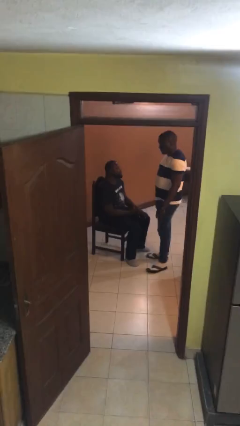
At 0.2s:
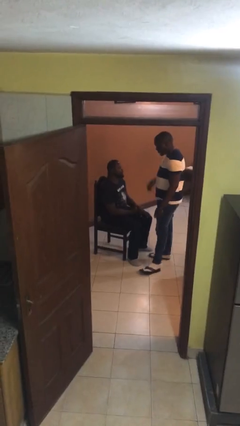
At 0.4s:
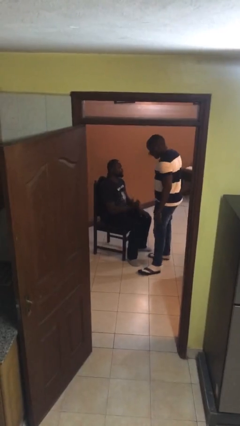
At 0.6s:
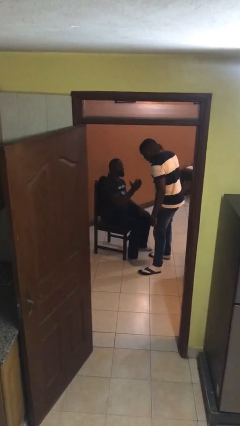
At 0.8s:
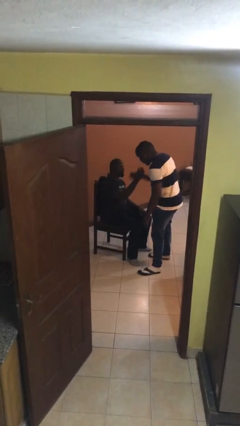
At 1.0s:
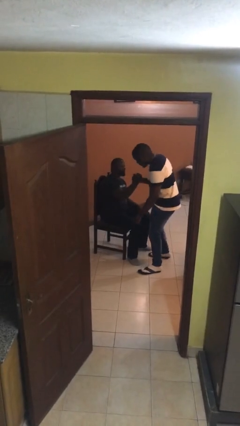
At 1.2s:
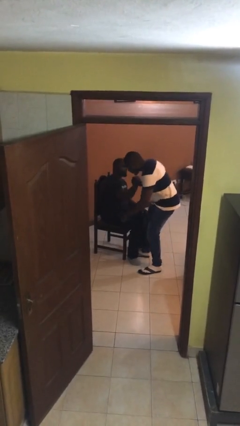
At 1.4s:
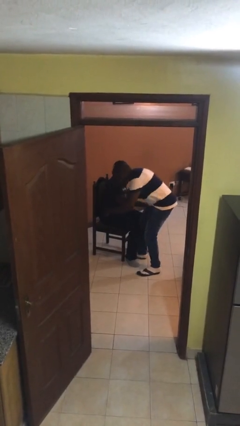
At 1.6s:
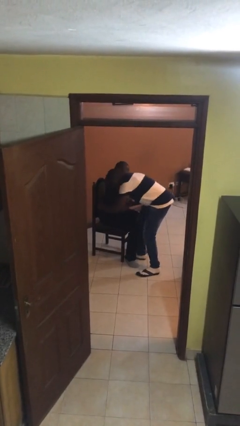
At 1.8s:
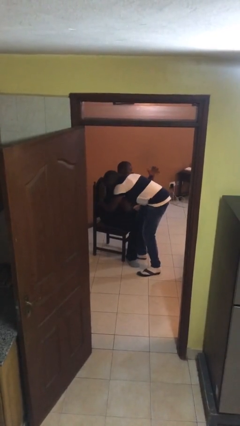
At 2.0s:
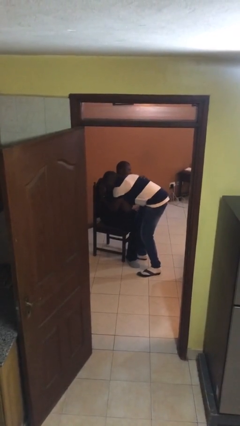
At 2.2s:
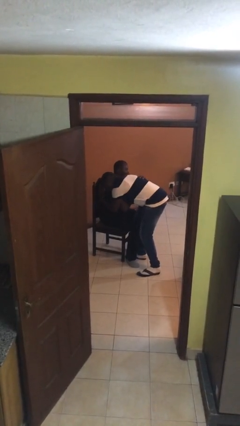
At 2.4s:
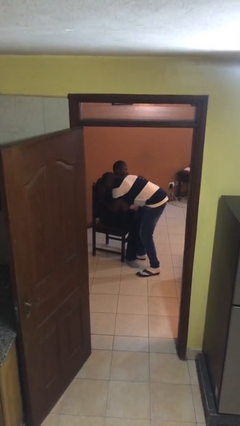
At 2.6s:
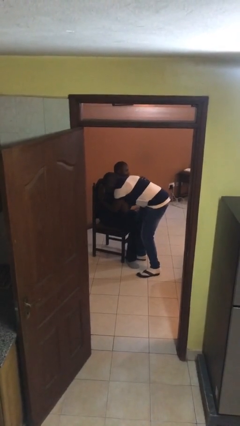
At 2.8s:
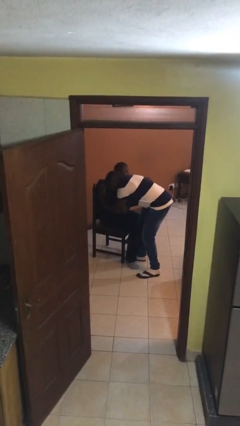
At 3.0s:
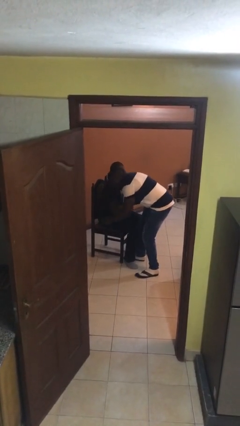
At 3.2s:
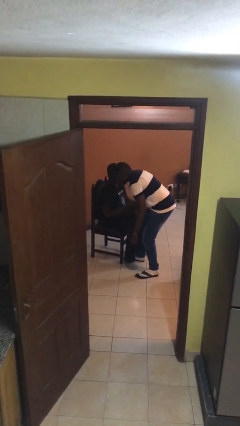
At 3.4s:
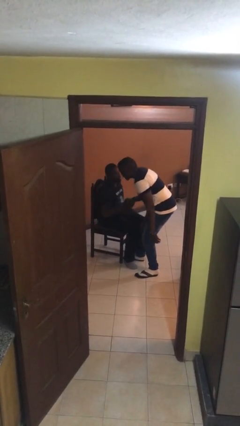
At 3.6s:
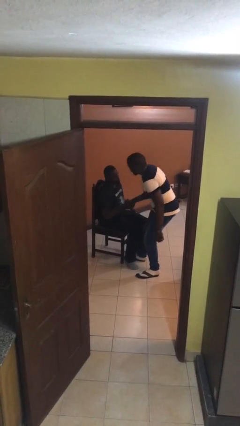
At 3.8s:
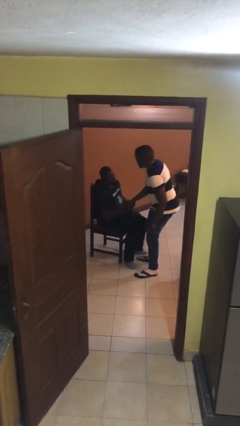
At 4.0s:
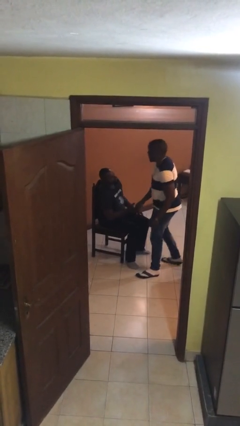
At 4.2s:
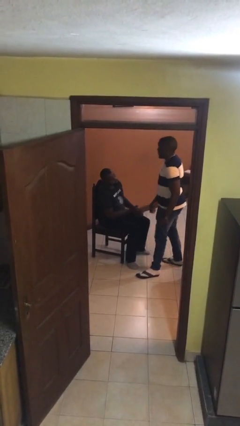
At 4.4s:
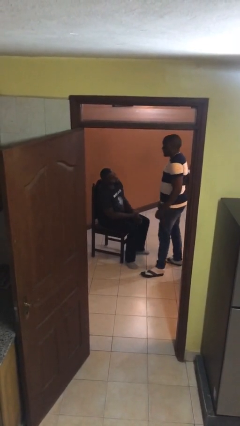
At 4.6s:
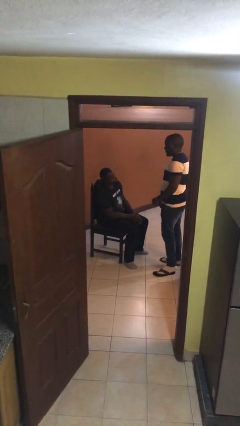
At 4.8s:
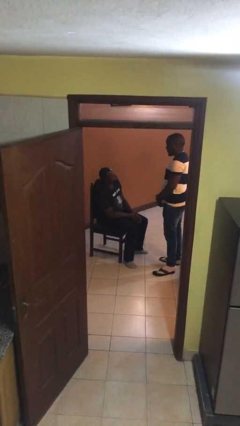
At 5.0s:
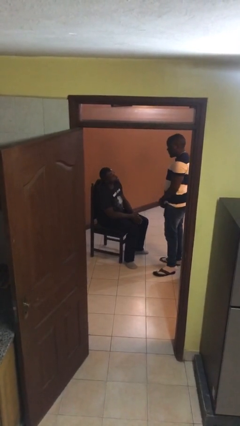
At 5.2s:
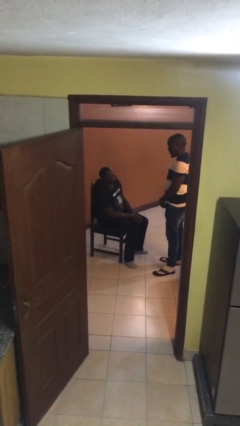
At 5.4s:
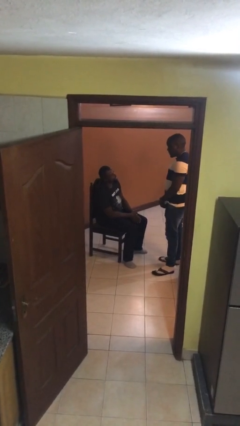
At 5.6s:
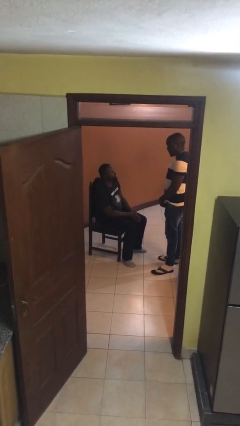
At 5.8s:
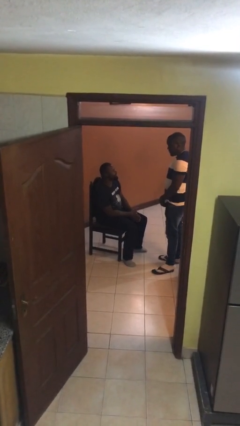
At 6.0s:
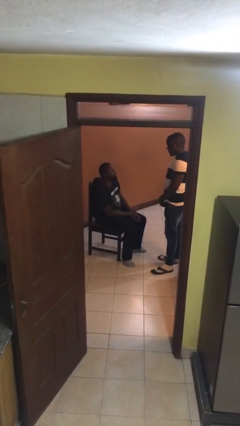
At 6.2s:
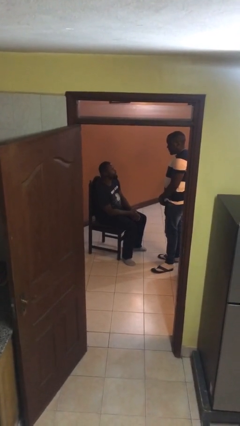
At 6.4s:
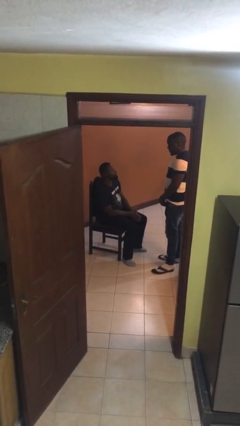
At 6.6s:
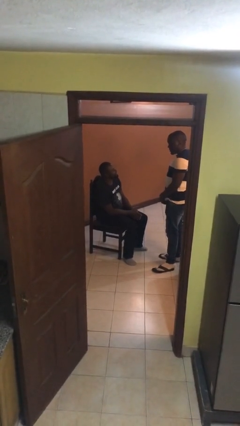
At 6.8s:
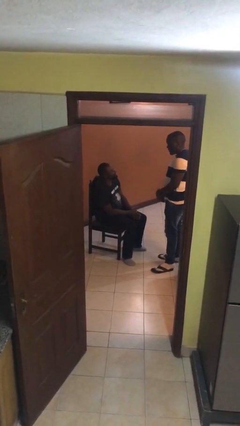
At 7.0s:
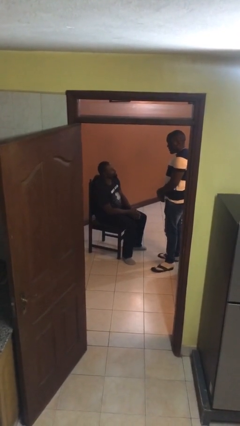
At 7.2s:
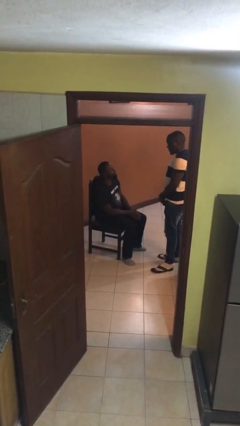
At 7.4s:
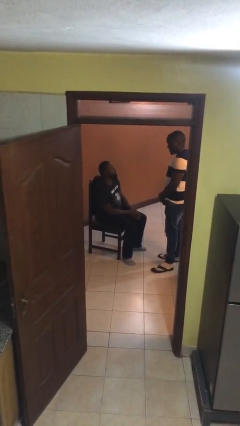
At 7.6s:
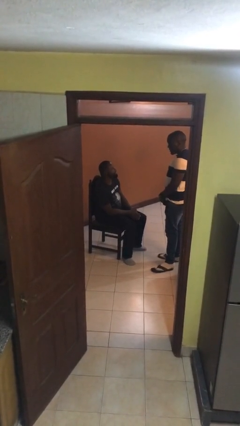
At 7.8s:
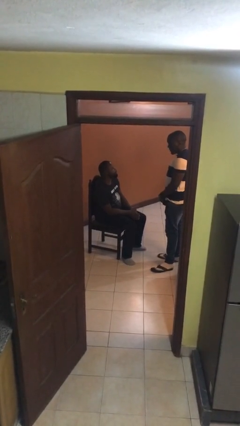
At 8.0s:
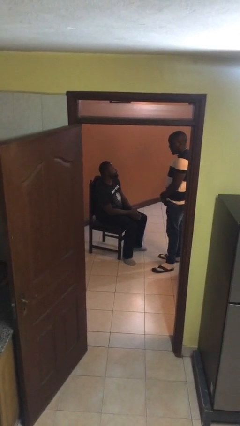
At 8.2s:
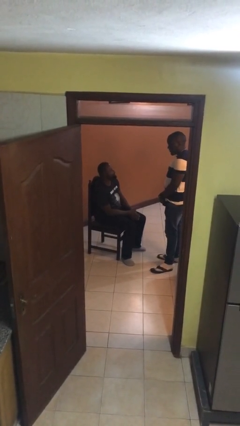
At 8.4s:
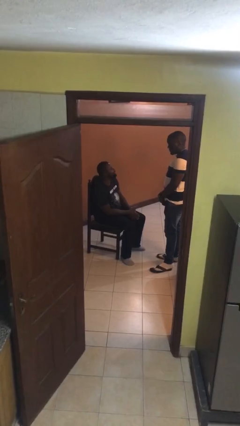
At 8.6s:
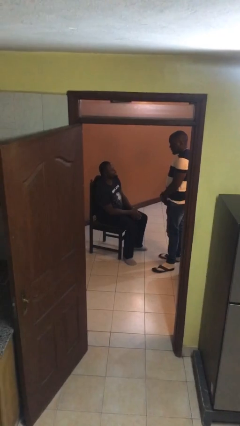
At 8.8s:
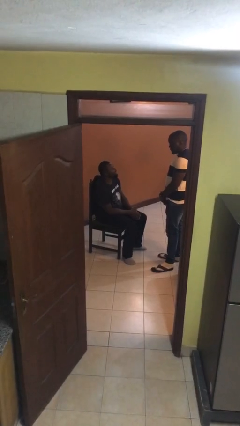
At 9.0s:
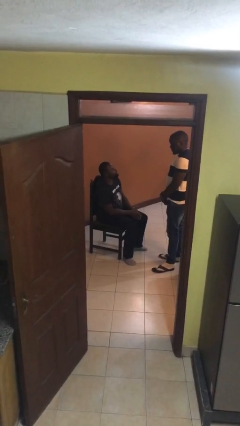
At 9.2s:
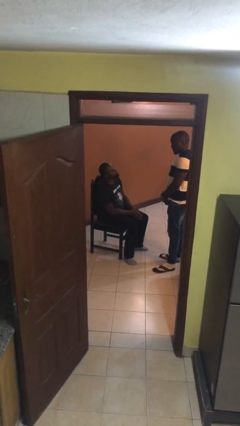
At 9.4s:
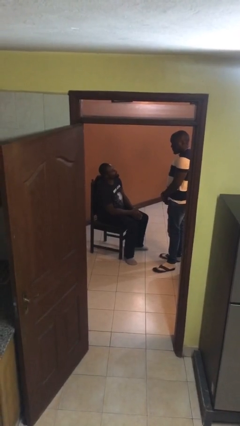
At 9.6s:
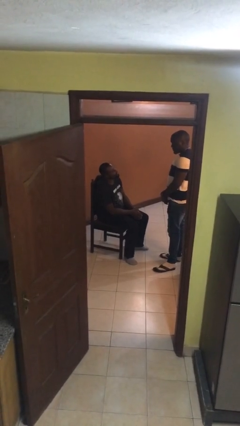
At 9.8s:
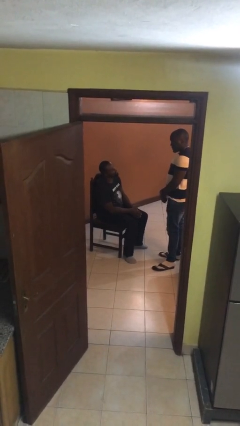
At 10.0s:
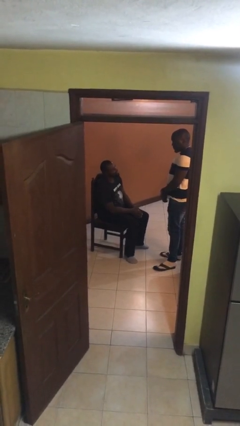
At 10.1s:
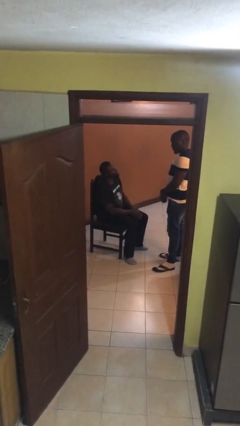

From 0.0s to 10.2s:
person embraces person

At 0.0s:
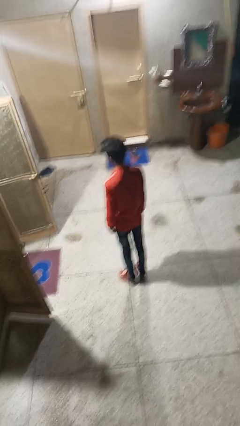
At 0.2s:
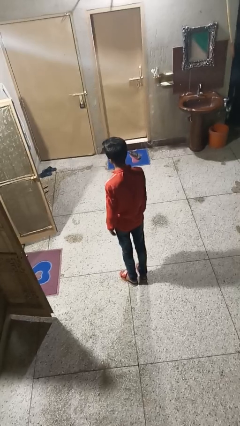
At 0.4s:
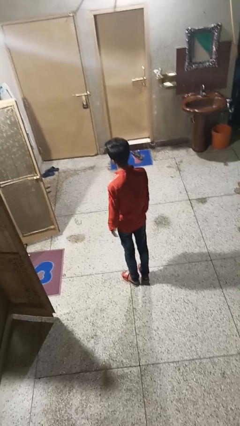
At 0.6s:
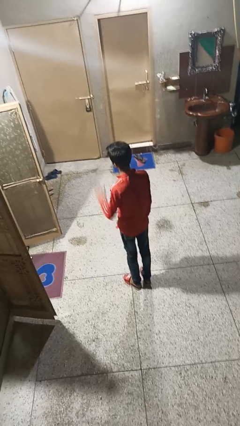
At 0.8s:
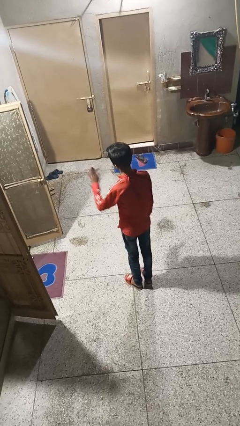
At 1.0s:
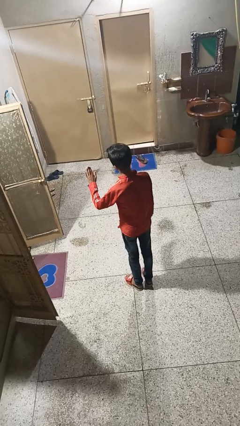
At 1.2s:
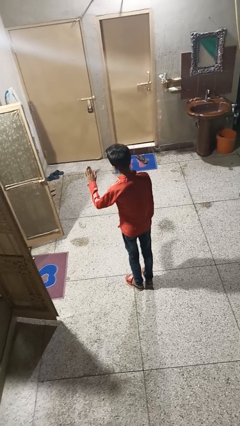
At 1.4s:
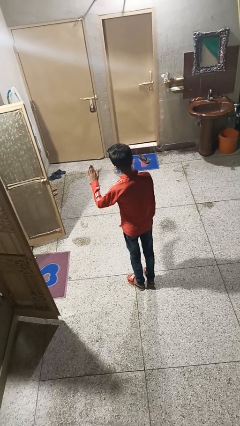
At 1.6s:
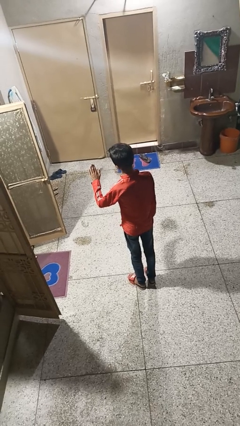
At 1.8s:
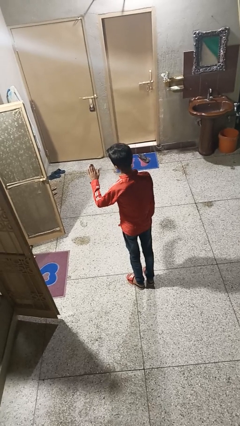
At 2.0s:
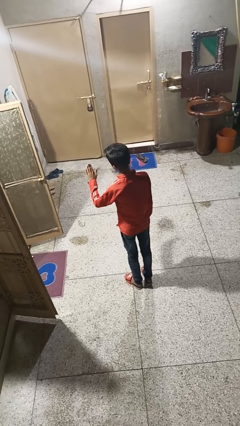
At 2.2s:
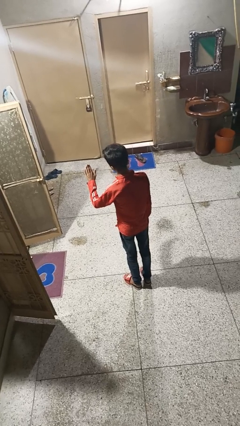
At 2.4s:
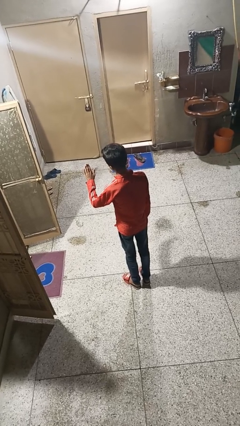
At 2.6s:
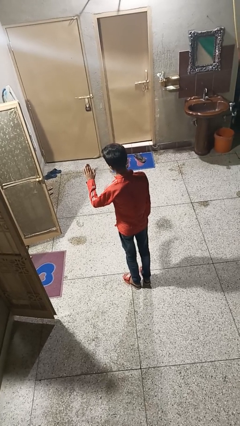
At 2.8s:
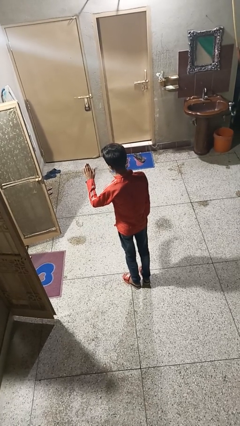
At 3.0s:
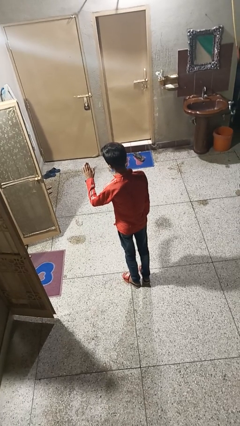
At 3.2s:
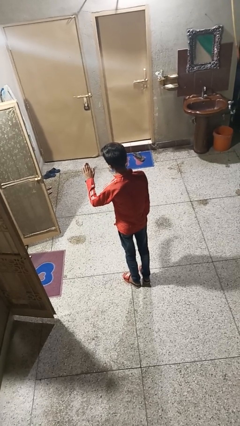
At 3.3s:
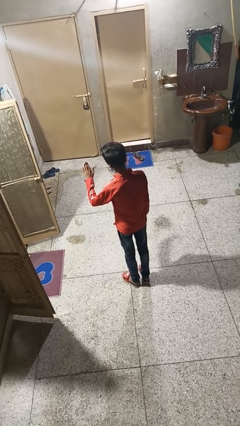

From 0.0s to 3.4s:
person gestures stop

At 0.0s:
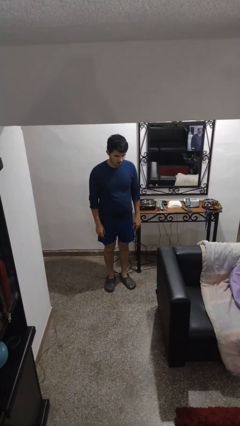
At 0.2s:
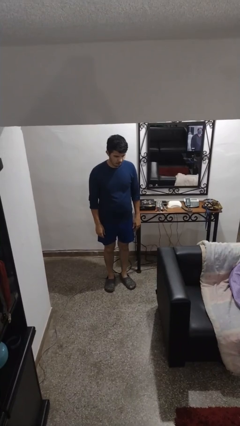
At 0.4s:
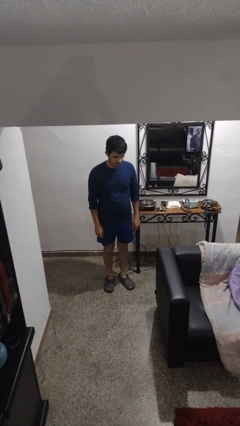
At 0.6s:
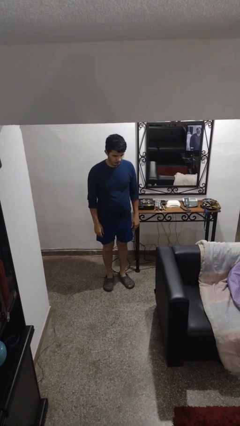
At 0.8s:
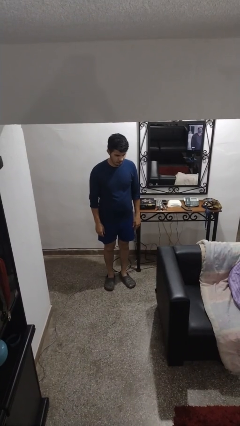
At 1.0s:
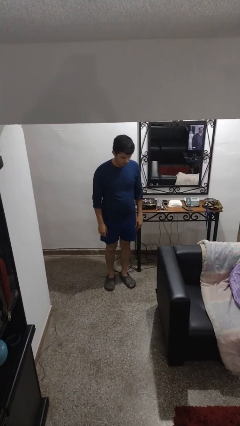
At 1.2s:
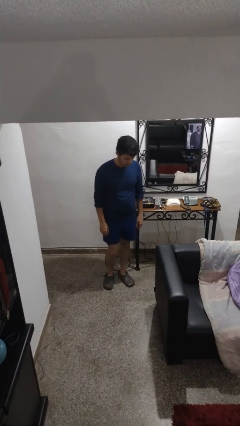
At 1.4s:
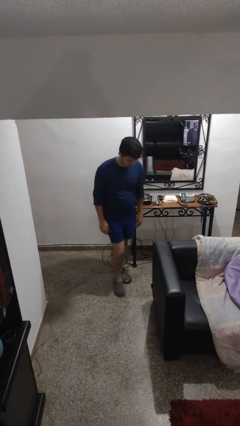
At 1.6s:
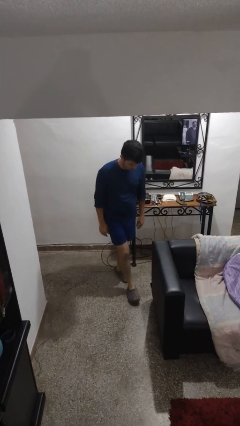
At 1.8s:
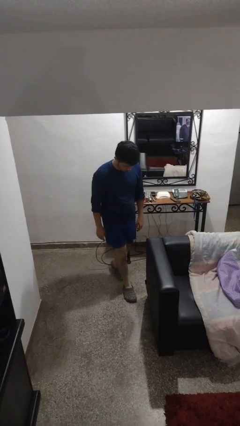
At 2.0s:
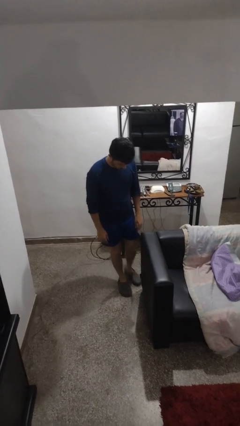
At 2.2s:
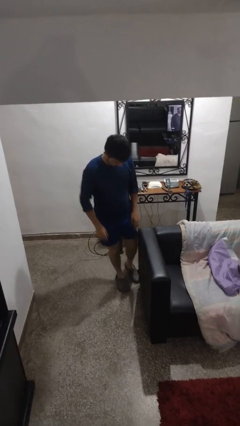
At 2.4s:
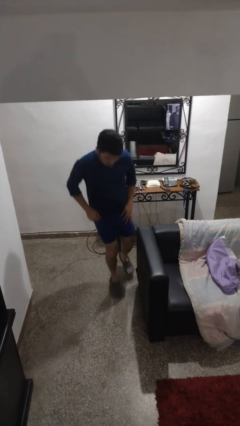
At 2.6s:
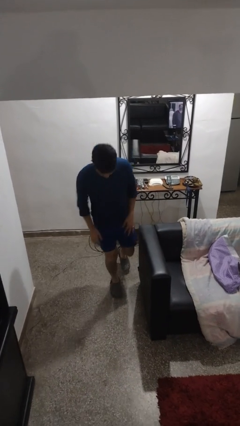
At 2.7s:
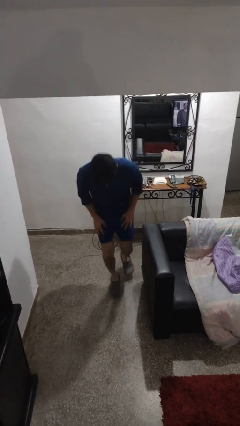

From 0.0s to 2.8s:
person trips on object on floor

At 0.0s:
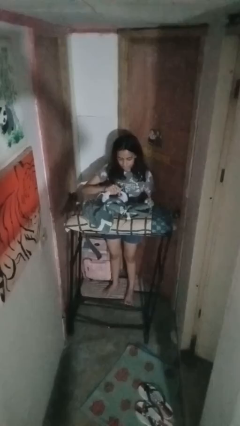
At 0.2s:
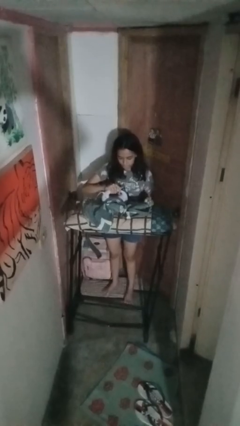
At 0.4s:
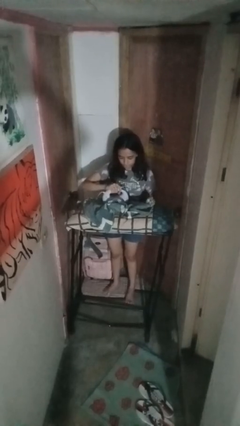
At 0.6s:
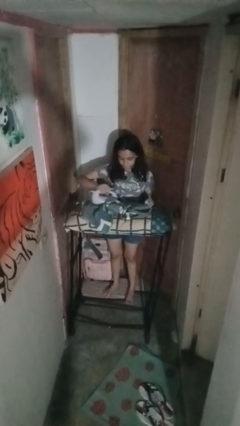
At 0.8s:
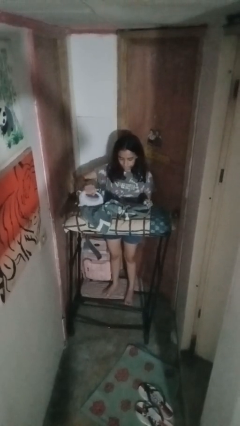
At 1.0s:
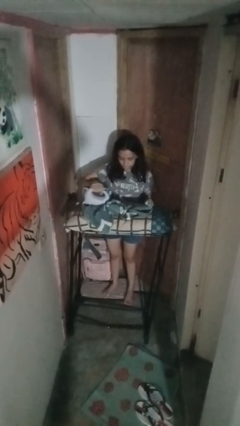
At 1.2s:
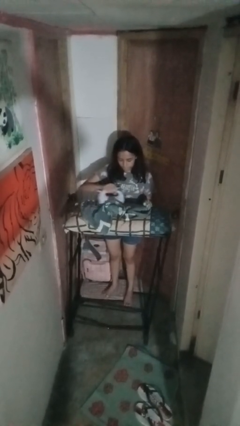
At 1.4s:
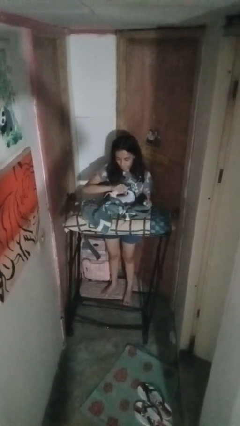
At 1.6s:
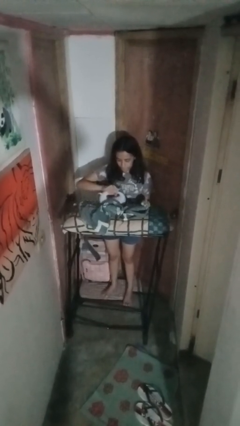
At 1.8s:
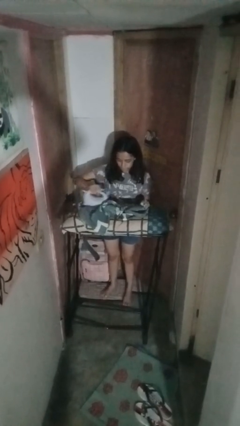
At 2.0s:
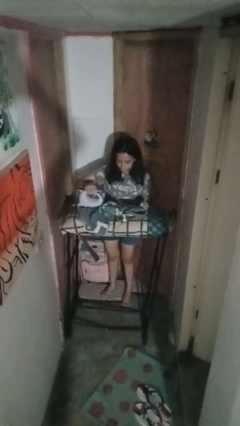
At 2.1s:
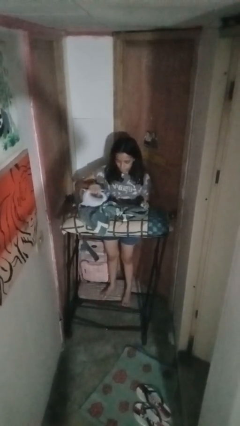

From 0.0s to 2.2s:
person irons clothes
